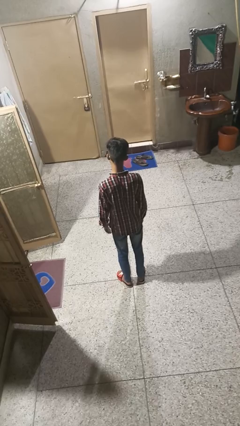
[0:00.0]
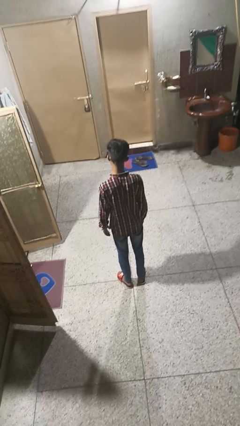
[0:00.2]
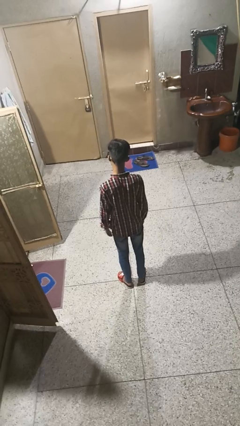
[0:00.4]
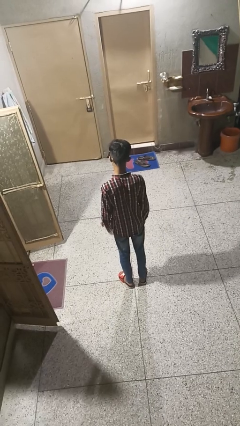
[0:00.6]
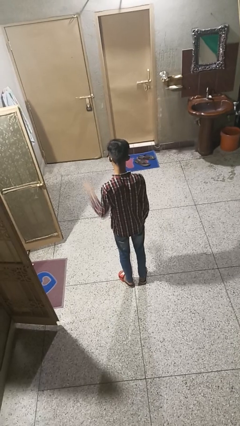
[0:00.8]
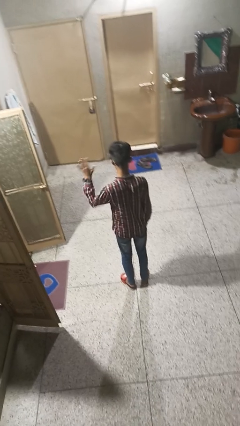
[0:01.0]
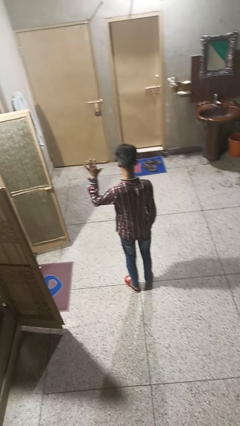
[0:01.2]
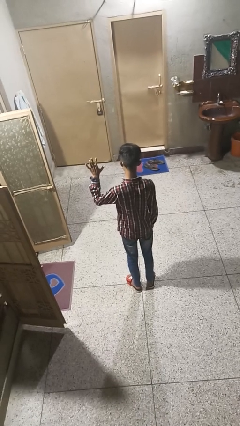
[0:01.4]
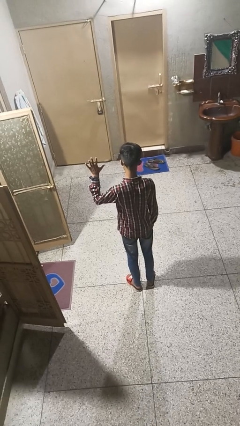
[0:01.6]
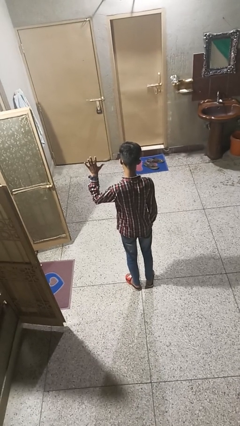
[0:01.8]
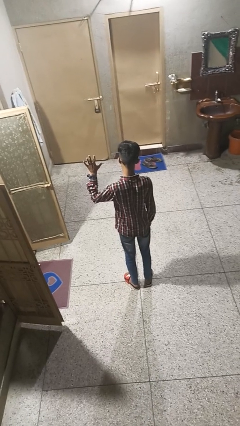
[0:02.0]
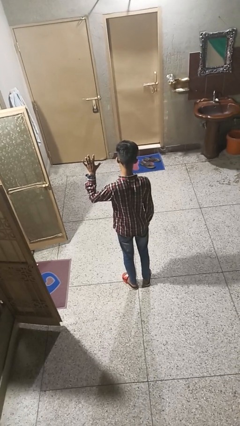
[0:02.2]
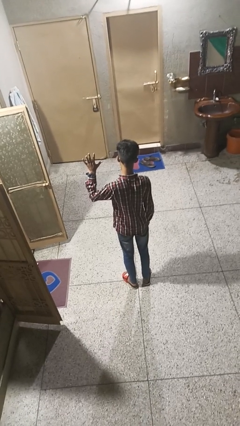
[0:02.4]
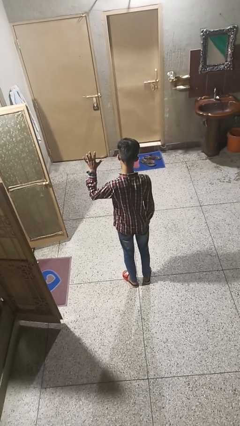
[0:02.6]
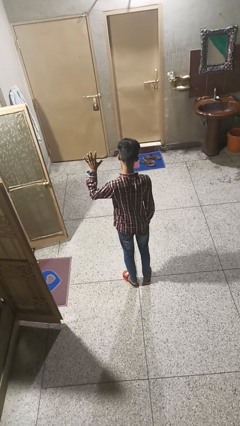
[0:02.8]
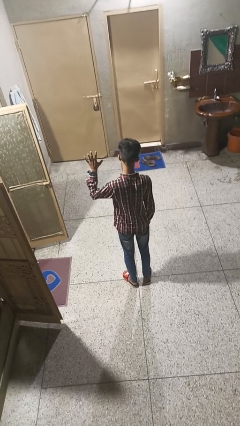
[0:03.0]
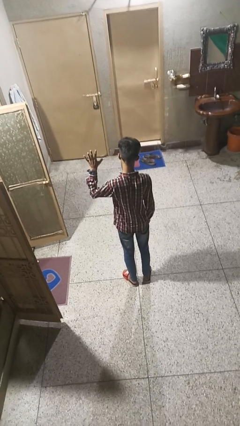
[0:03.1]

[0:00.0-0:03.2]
person gestures number five

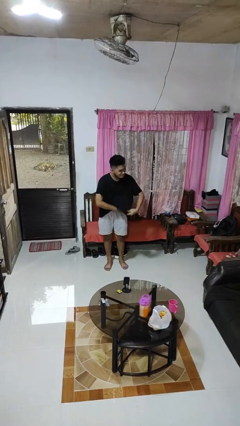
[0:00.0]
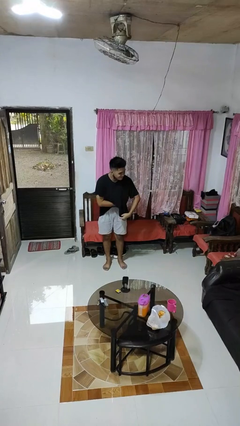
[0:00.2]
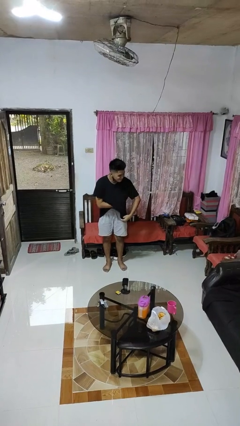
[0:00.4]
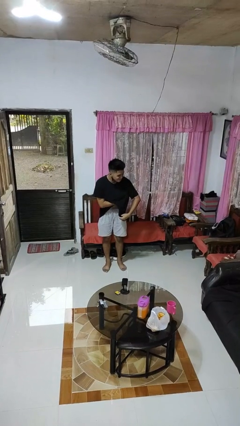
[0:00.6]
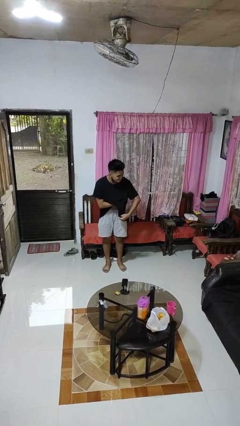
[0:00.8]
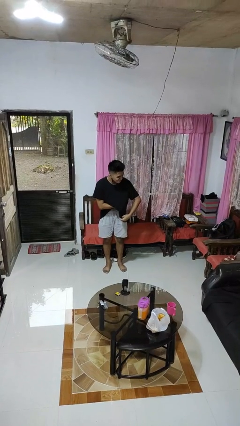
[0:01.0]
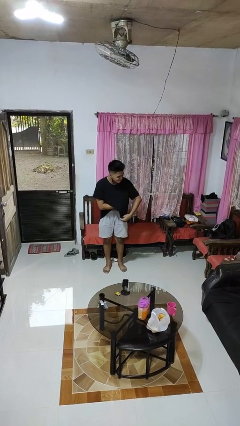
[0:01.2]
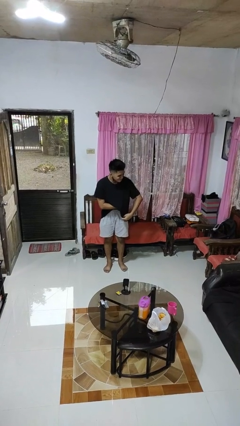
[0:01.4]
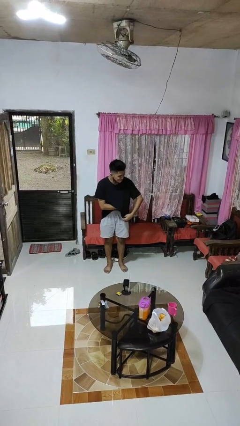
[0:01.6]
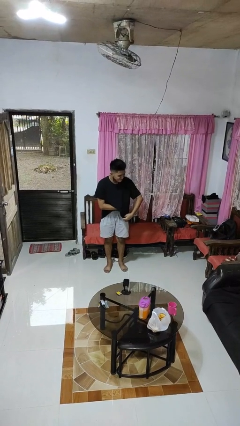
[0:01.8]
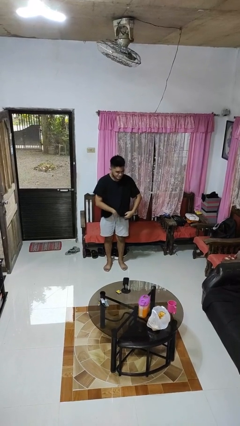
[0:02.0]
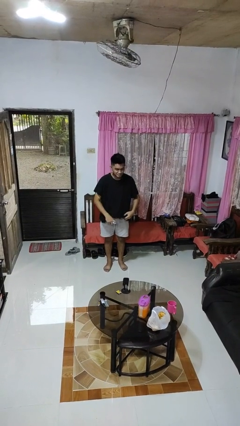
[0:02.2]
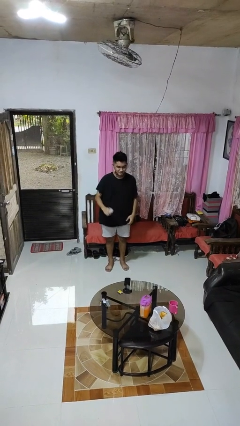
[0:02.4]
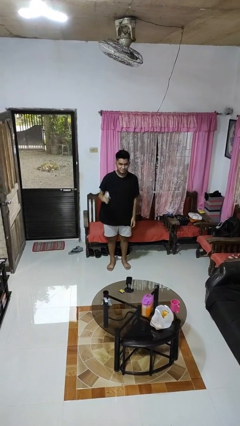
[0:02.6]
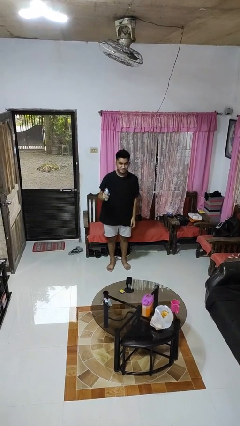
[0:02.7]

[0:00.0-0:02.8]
person applies deodorant

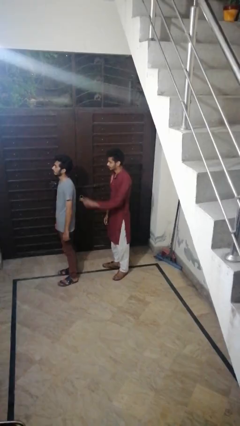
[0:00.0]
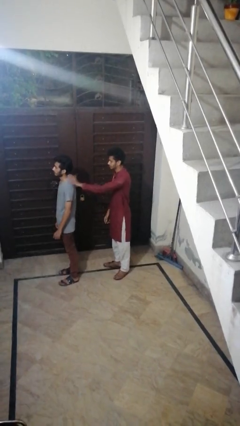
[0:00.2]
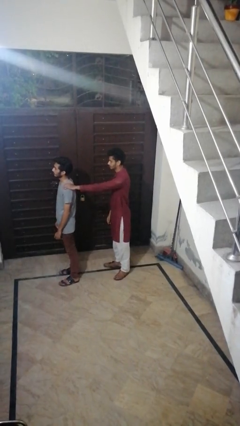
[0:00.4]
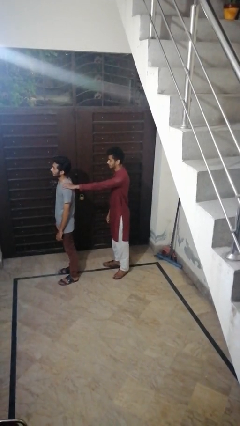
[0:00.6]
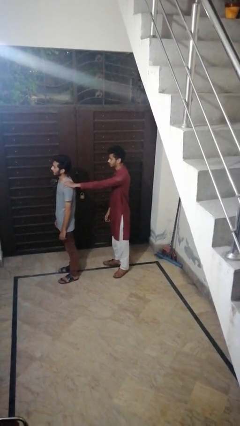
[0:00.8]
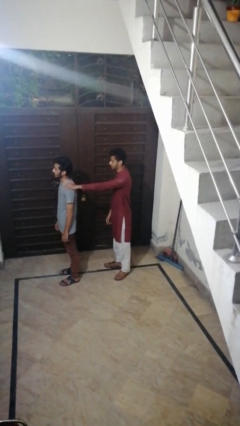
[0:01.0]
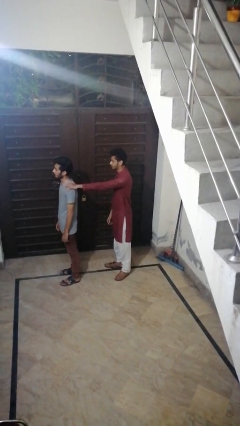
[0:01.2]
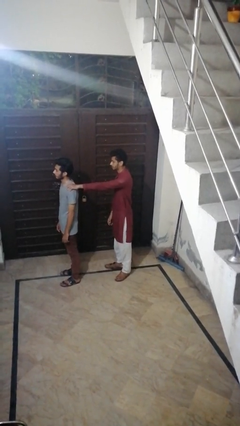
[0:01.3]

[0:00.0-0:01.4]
person grabs person by shoulder

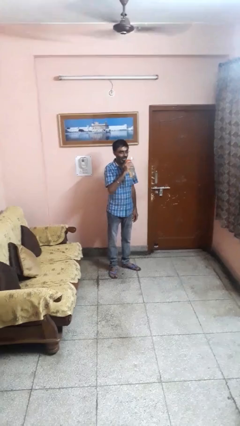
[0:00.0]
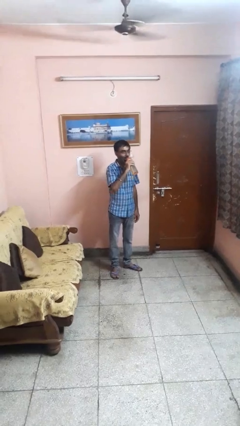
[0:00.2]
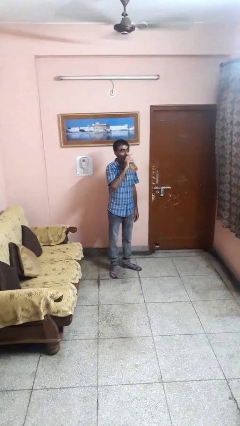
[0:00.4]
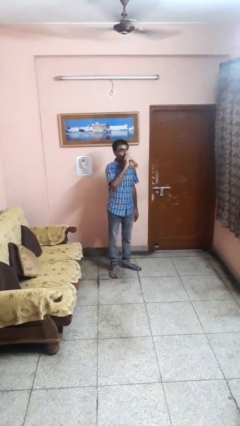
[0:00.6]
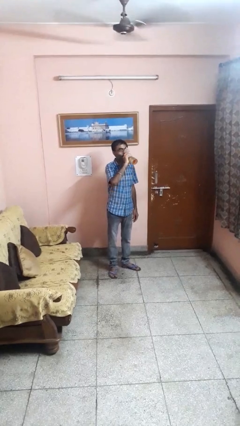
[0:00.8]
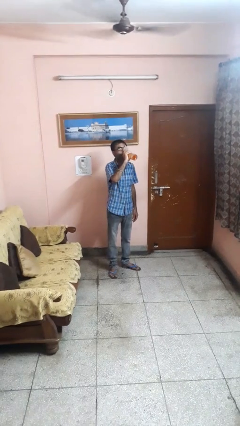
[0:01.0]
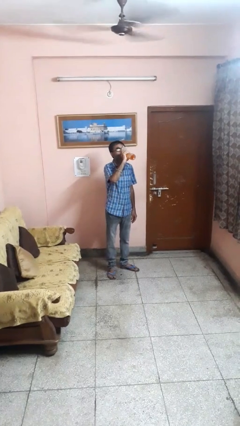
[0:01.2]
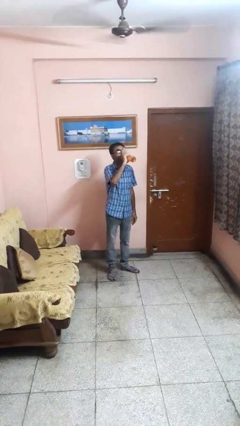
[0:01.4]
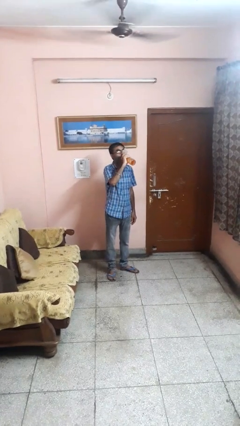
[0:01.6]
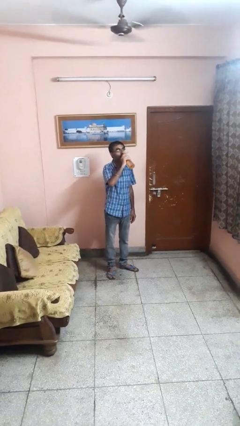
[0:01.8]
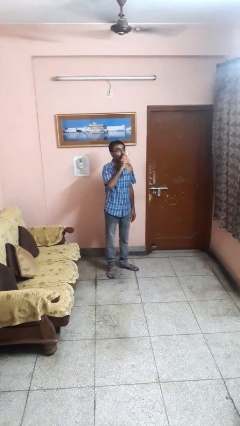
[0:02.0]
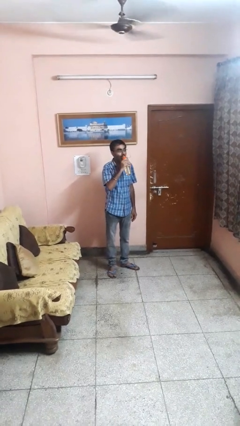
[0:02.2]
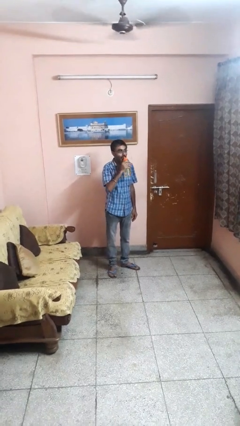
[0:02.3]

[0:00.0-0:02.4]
person drinks from bottle

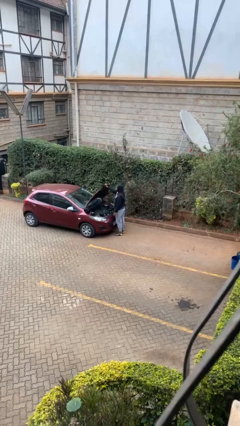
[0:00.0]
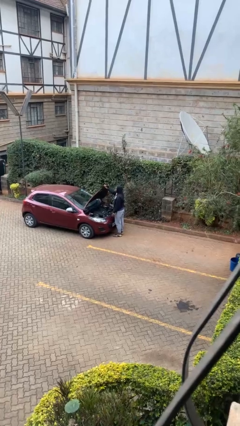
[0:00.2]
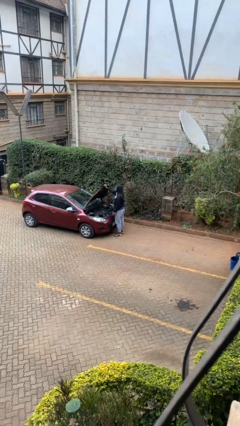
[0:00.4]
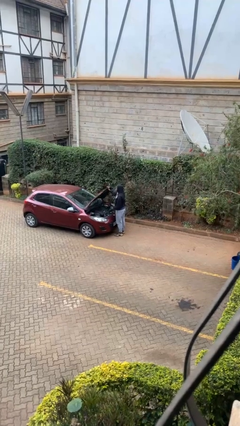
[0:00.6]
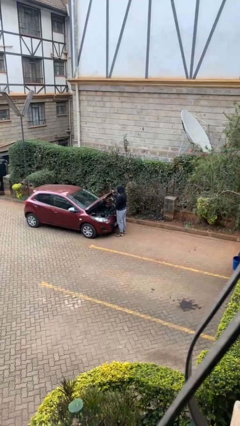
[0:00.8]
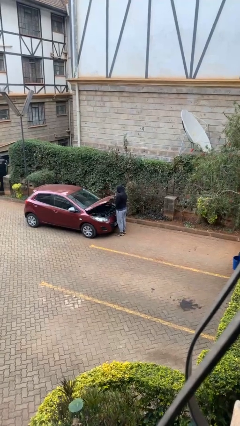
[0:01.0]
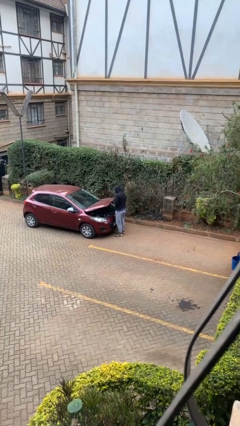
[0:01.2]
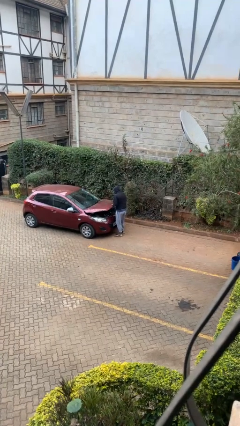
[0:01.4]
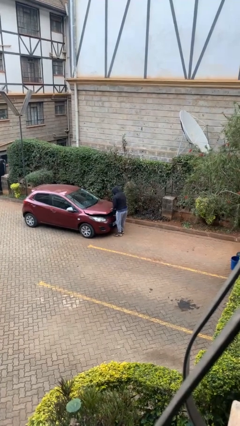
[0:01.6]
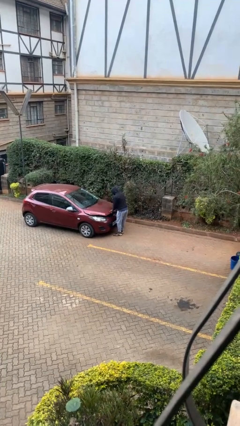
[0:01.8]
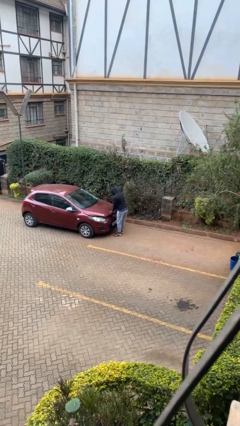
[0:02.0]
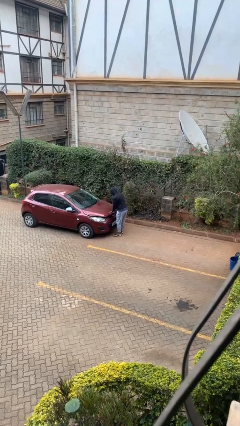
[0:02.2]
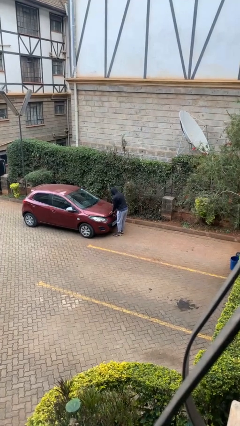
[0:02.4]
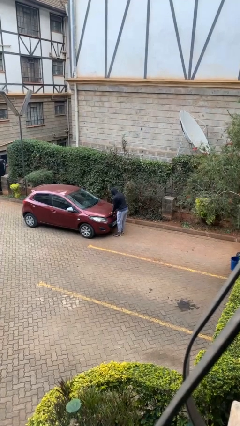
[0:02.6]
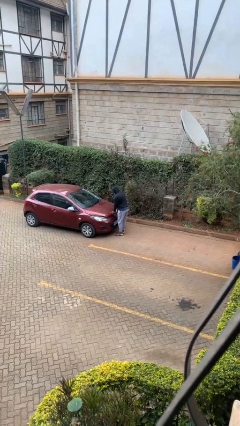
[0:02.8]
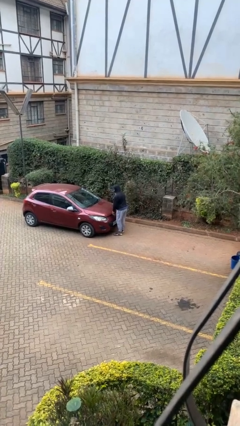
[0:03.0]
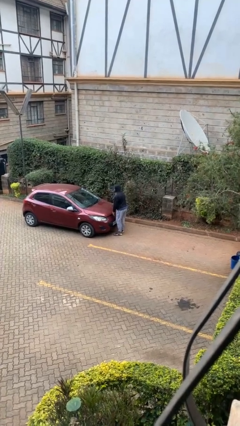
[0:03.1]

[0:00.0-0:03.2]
person closes car hood

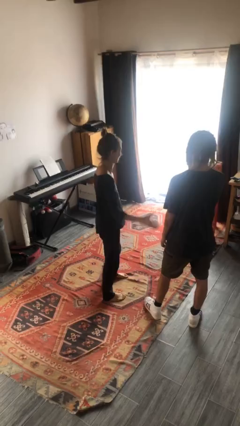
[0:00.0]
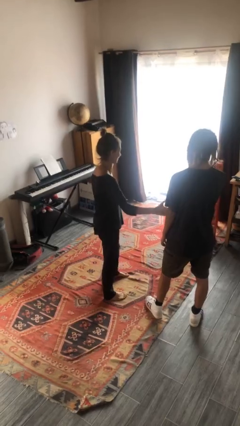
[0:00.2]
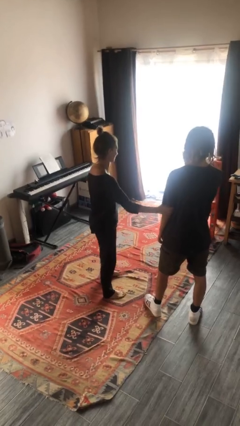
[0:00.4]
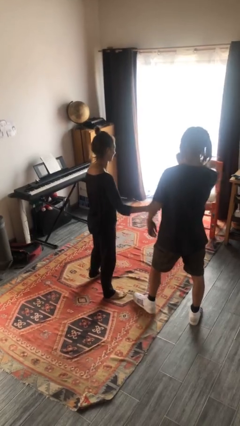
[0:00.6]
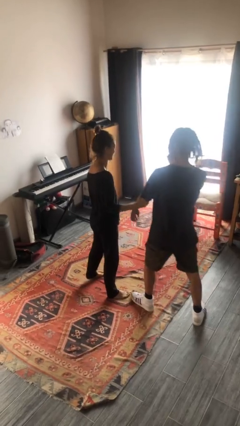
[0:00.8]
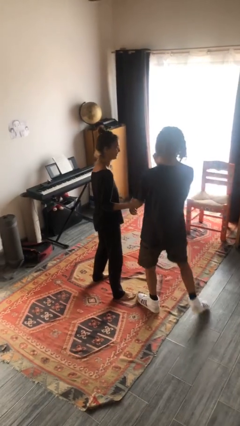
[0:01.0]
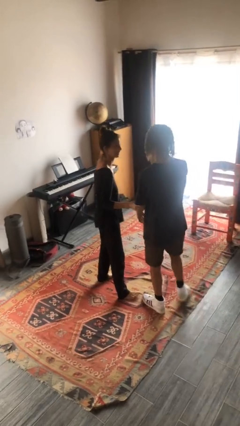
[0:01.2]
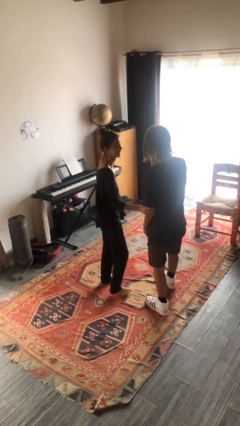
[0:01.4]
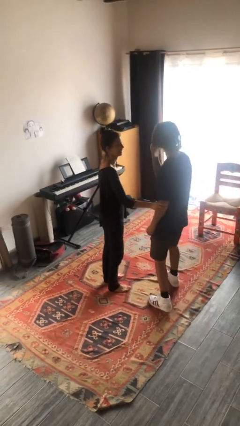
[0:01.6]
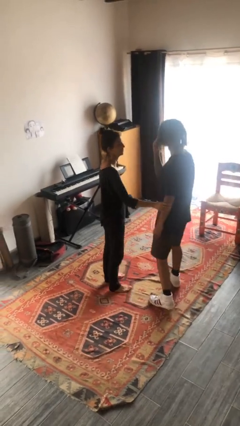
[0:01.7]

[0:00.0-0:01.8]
person grabs person by forearm

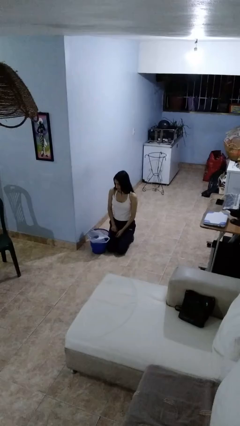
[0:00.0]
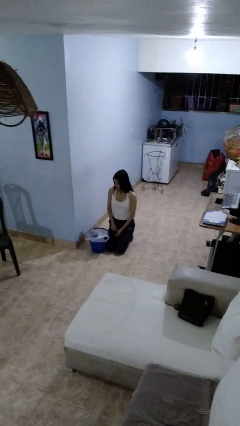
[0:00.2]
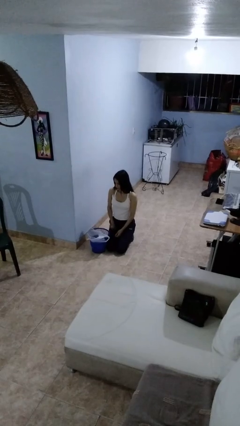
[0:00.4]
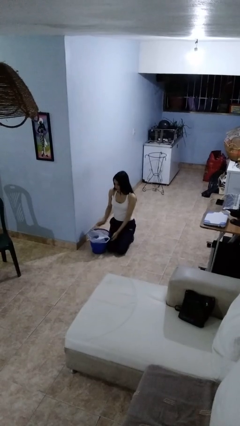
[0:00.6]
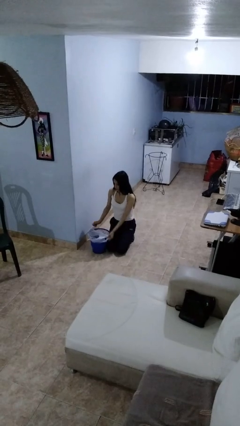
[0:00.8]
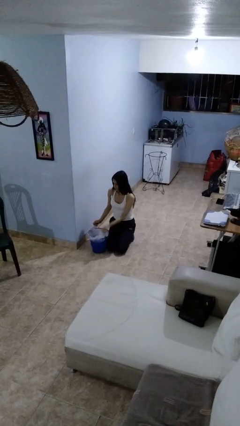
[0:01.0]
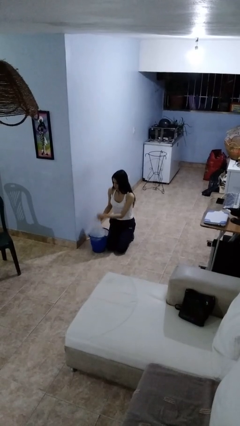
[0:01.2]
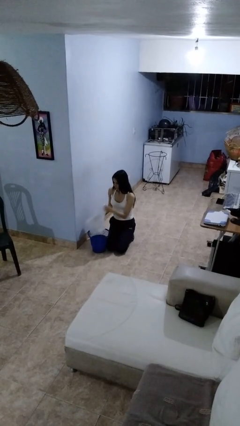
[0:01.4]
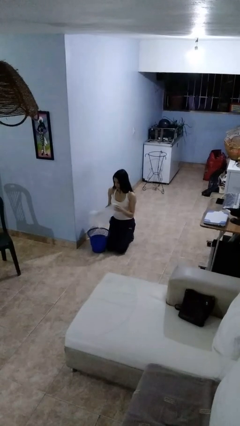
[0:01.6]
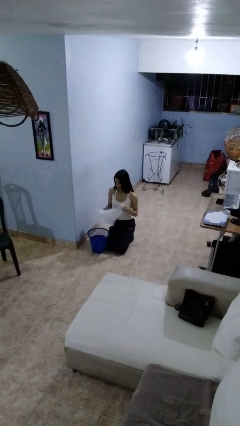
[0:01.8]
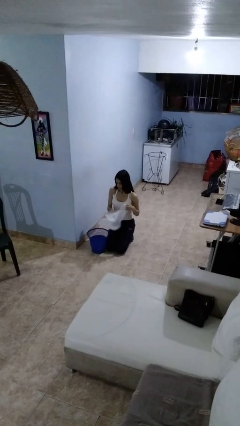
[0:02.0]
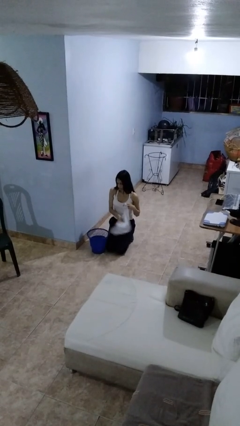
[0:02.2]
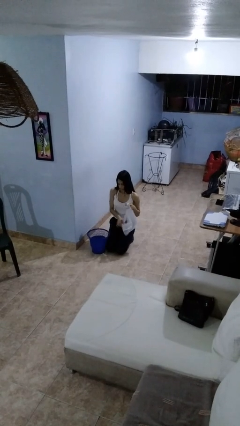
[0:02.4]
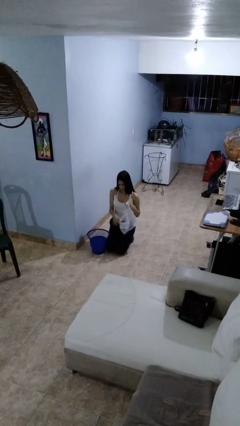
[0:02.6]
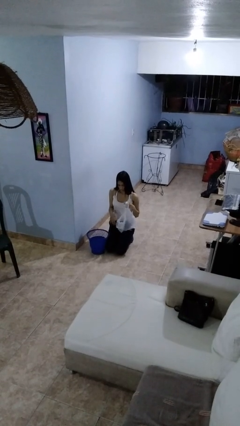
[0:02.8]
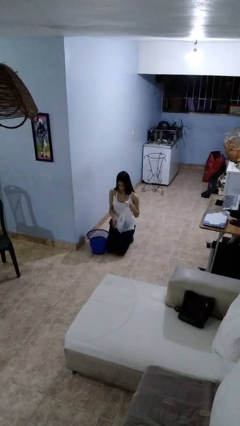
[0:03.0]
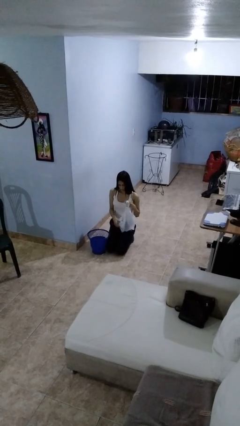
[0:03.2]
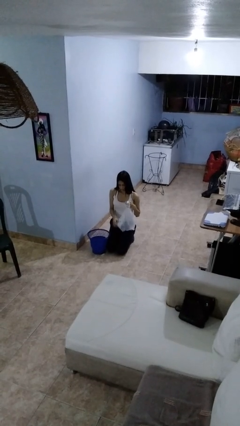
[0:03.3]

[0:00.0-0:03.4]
person removes trashbag from trashcan
